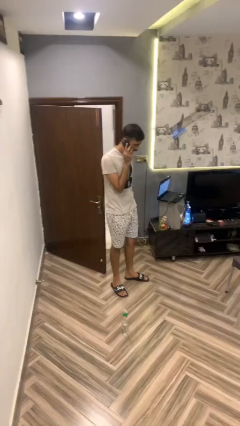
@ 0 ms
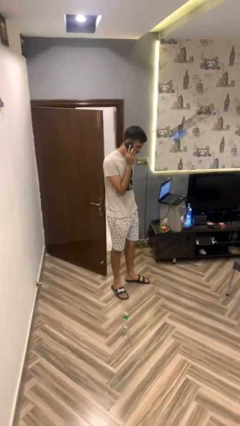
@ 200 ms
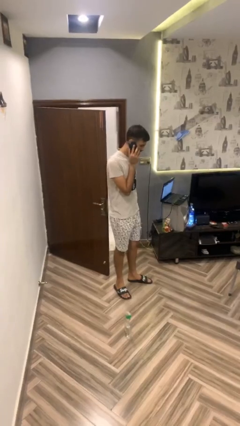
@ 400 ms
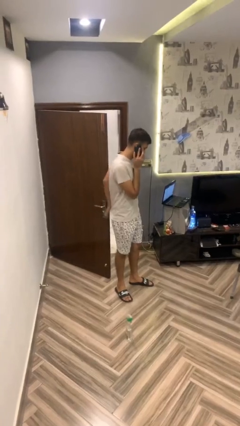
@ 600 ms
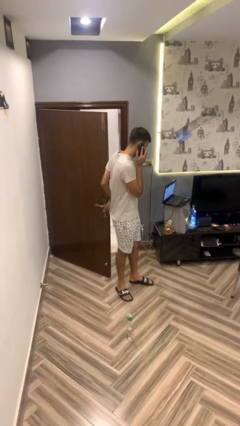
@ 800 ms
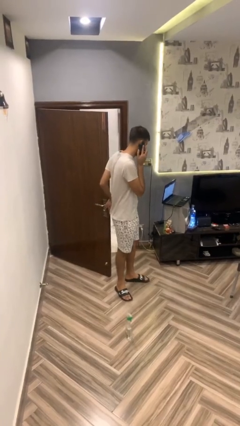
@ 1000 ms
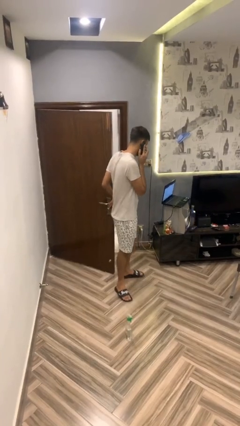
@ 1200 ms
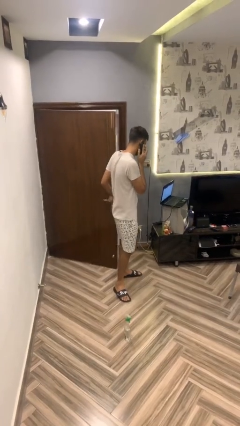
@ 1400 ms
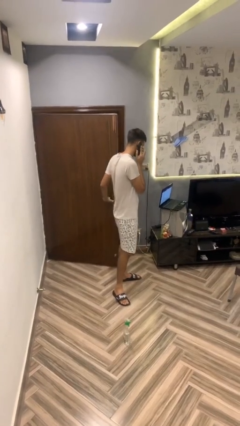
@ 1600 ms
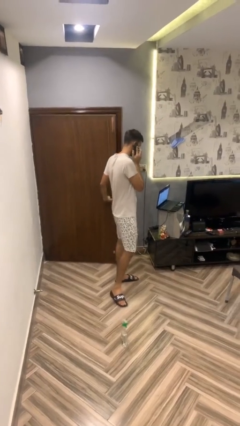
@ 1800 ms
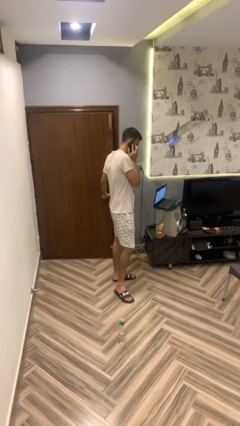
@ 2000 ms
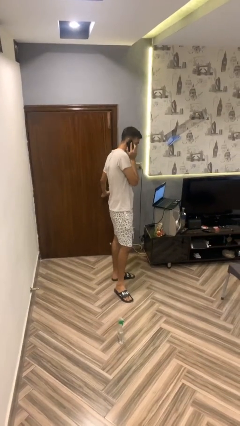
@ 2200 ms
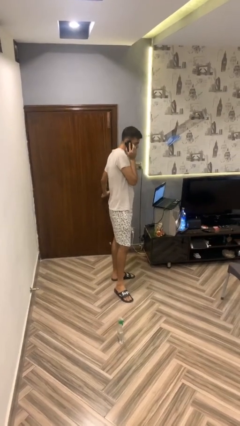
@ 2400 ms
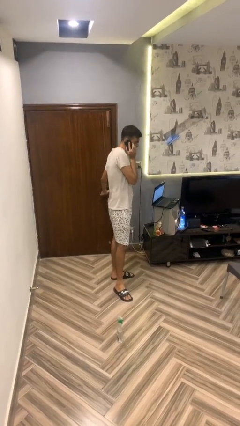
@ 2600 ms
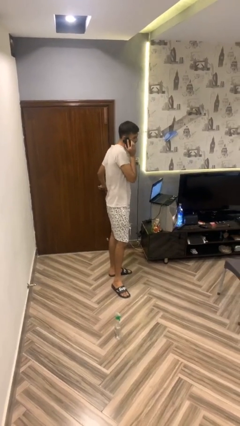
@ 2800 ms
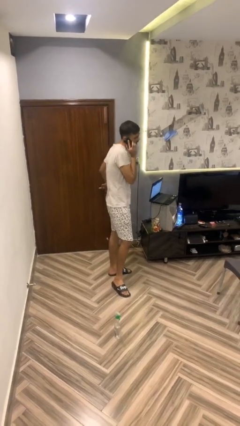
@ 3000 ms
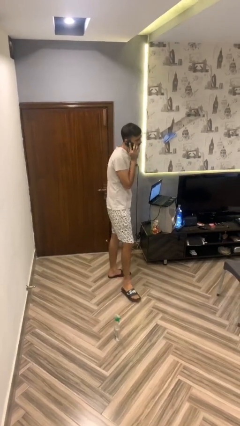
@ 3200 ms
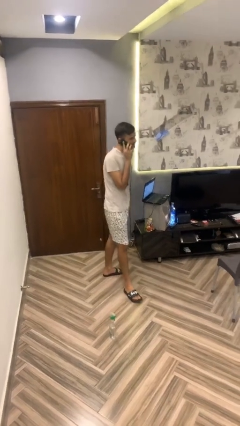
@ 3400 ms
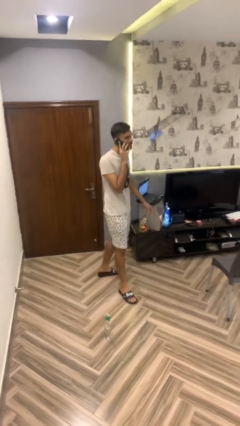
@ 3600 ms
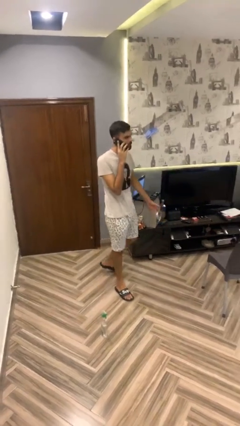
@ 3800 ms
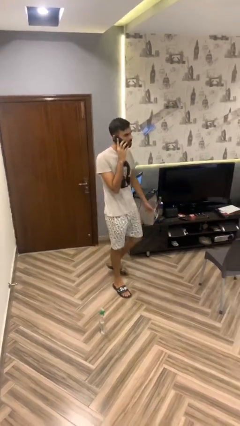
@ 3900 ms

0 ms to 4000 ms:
person closes facility door

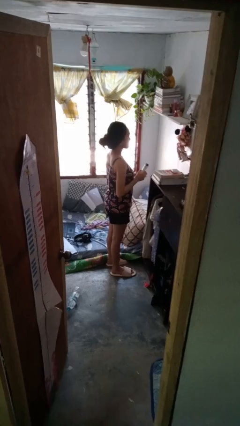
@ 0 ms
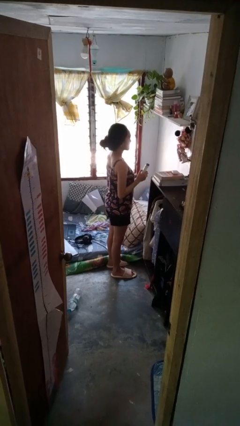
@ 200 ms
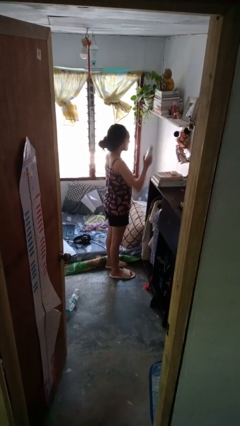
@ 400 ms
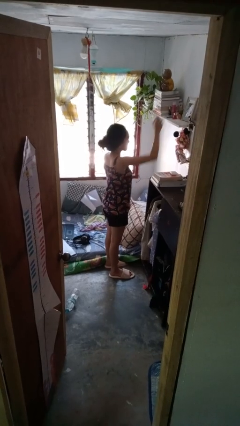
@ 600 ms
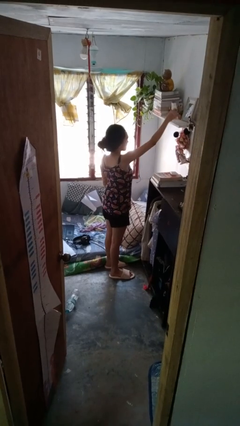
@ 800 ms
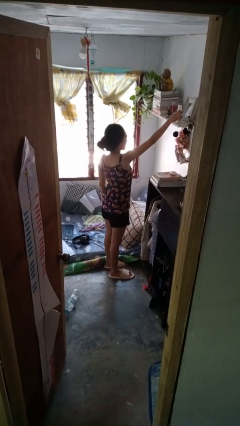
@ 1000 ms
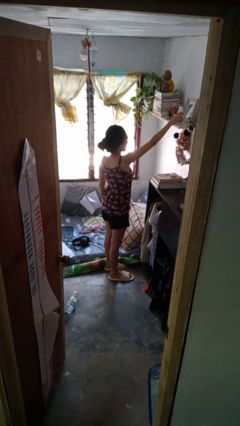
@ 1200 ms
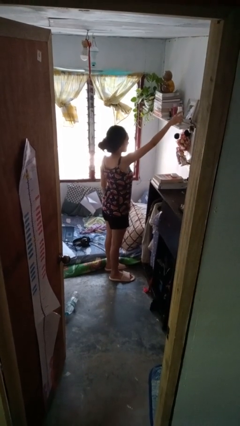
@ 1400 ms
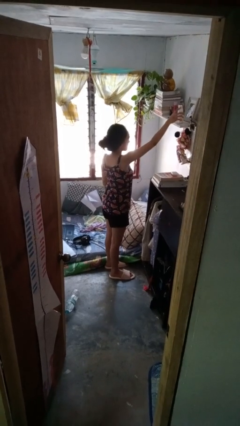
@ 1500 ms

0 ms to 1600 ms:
person puts down object on shelf

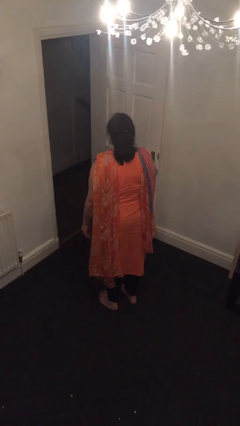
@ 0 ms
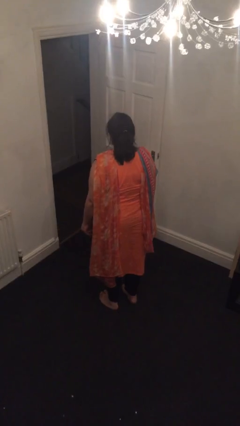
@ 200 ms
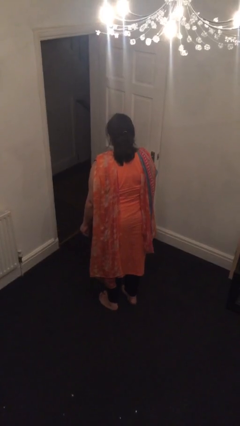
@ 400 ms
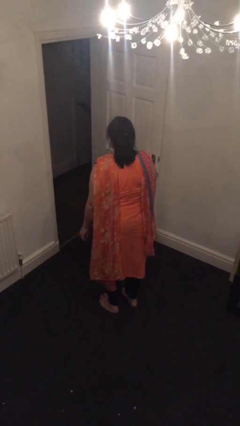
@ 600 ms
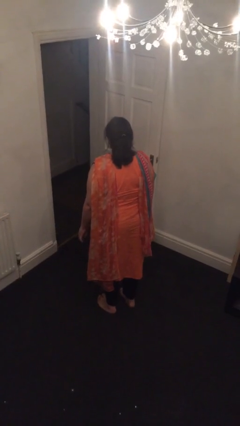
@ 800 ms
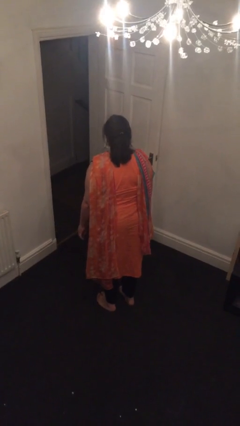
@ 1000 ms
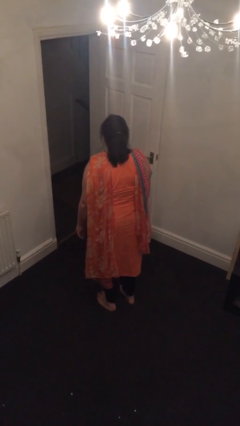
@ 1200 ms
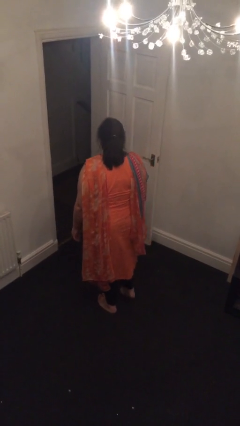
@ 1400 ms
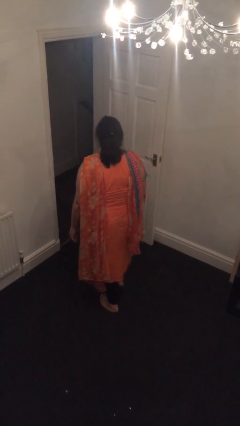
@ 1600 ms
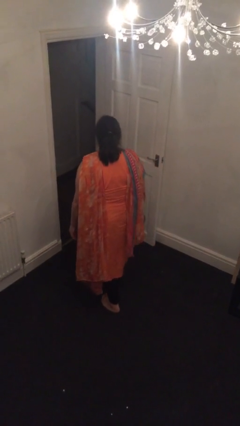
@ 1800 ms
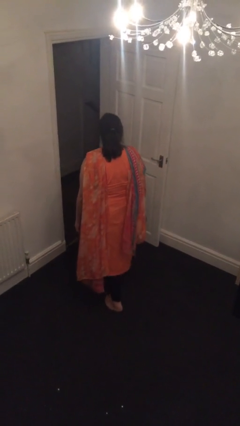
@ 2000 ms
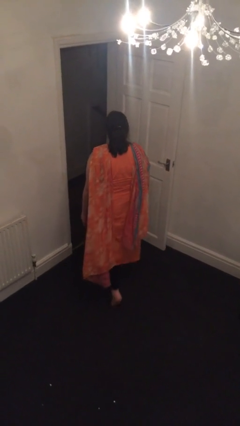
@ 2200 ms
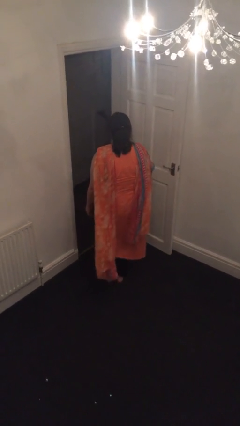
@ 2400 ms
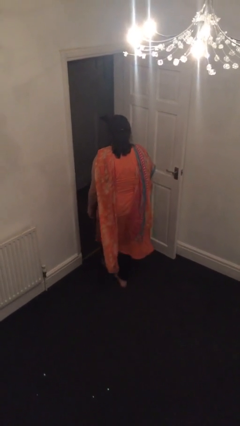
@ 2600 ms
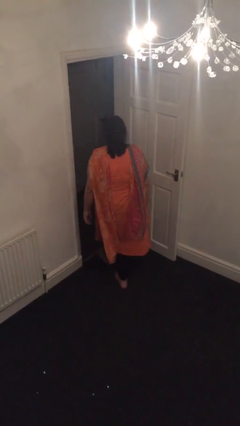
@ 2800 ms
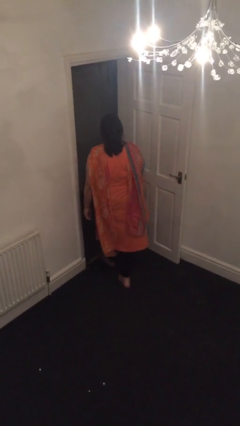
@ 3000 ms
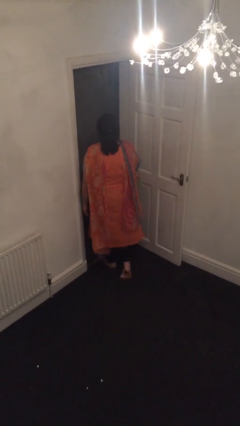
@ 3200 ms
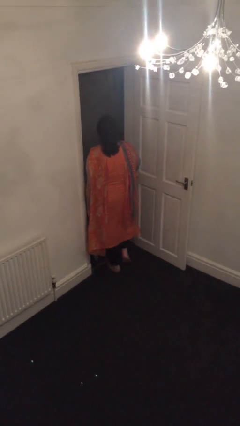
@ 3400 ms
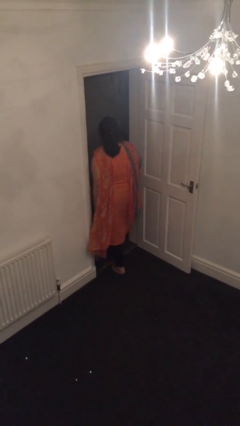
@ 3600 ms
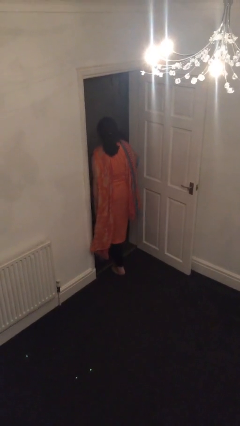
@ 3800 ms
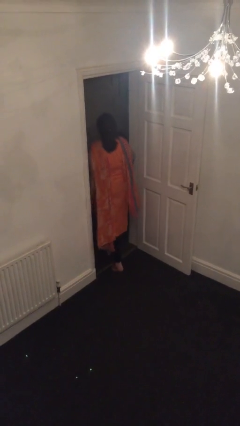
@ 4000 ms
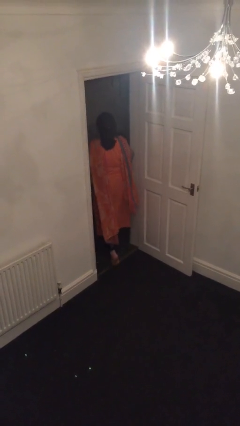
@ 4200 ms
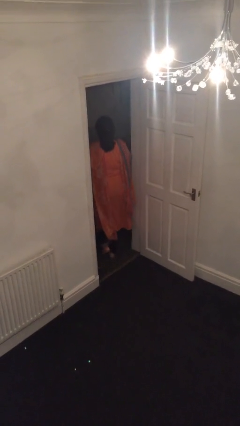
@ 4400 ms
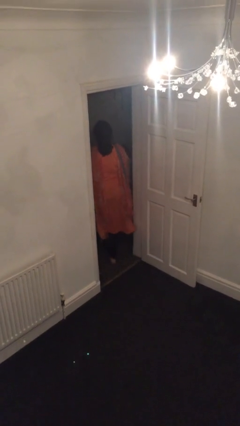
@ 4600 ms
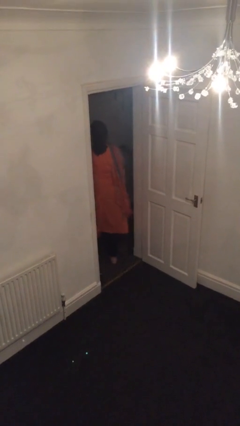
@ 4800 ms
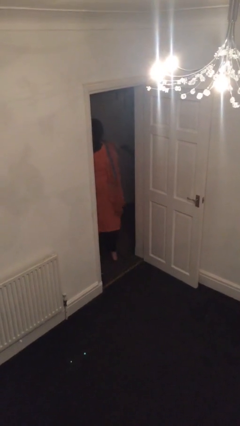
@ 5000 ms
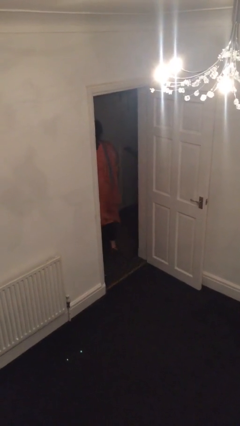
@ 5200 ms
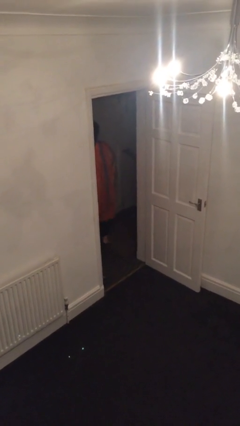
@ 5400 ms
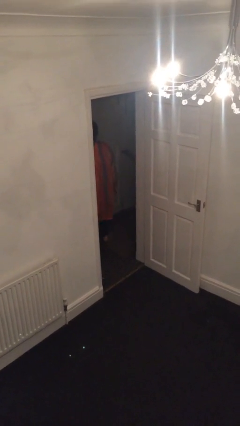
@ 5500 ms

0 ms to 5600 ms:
person exits scene through structure

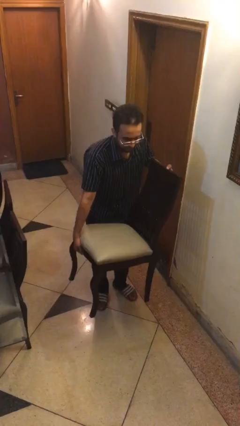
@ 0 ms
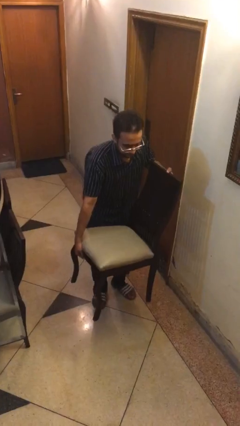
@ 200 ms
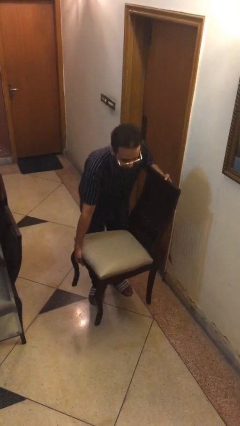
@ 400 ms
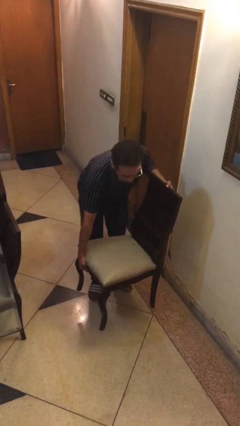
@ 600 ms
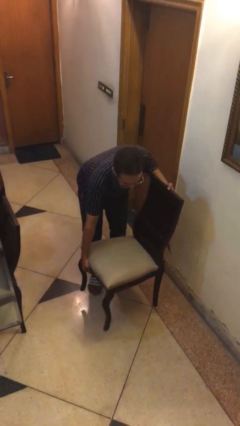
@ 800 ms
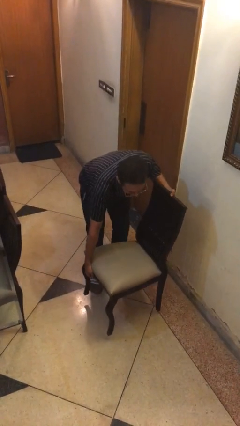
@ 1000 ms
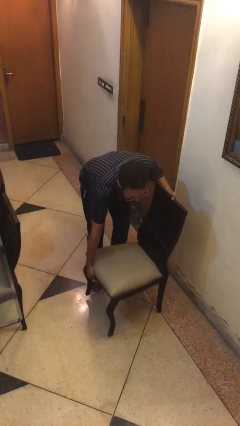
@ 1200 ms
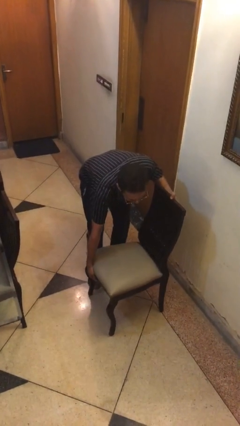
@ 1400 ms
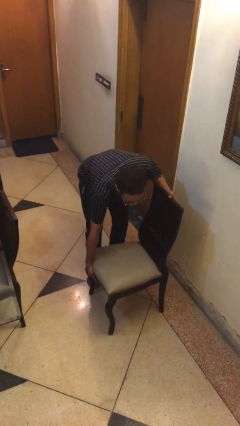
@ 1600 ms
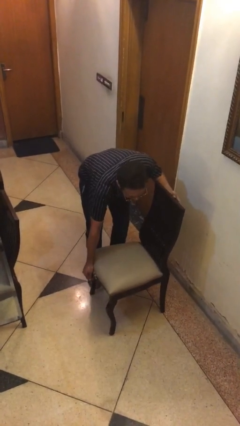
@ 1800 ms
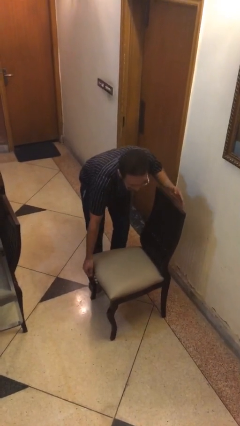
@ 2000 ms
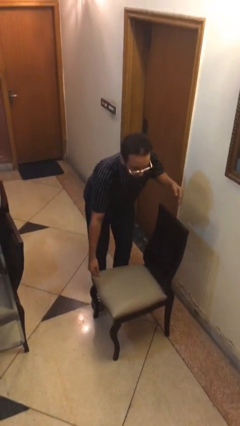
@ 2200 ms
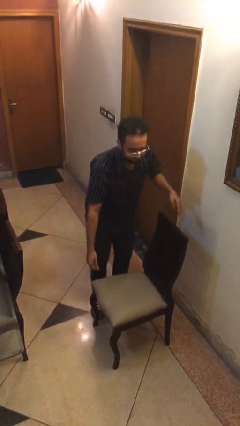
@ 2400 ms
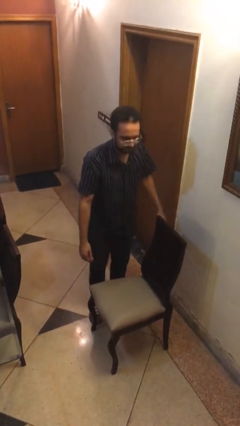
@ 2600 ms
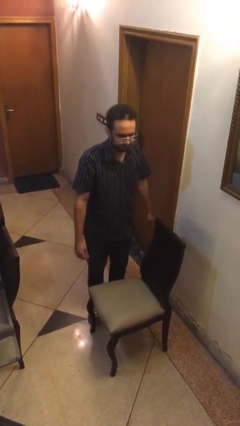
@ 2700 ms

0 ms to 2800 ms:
person puts down object on floor

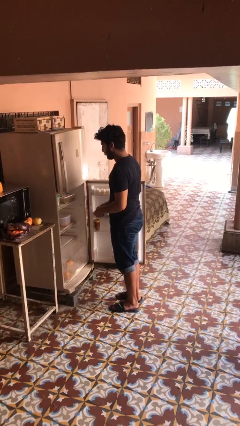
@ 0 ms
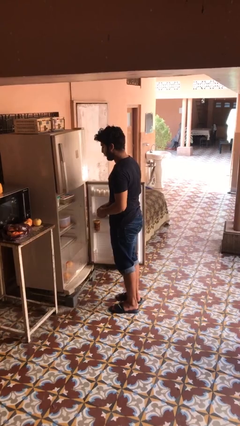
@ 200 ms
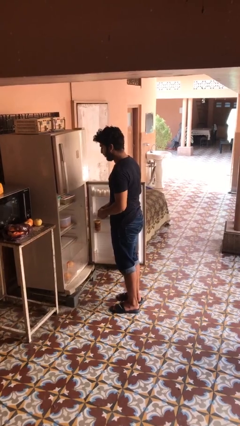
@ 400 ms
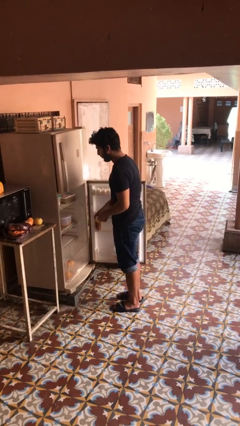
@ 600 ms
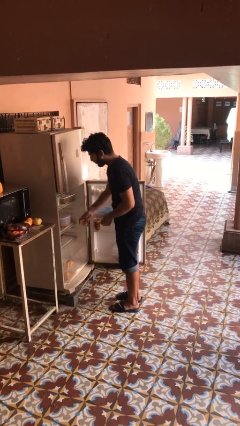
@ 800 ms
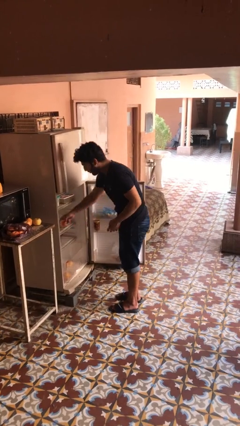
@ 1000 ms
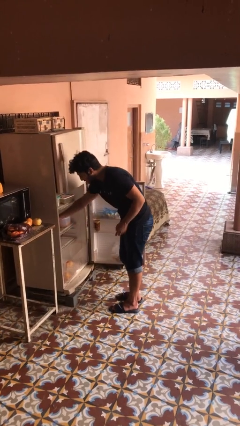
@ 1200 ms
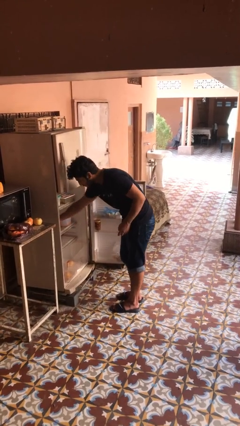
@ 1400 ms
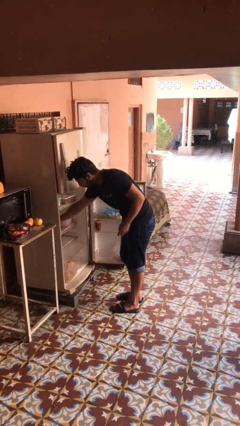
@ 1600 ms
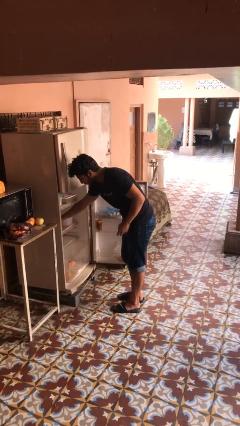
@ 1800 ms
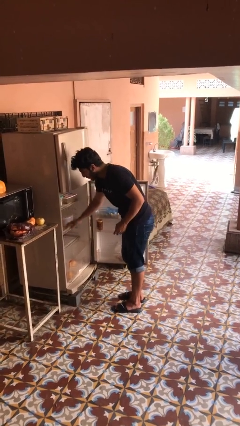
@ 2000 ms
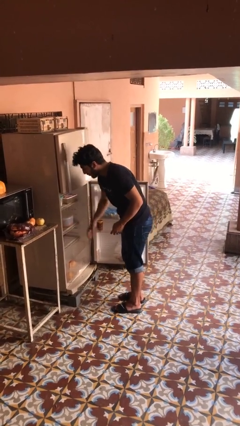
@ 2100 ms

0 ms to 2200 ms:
person loads groceries into refrigerator

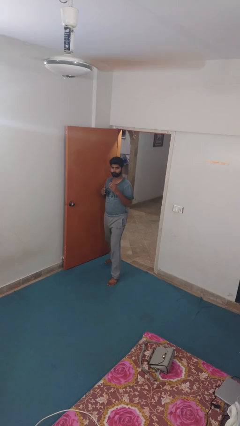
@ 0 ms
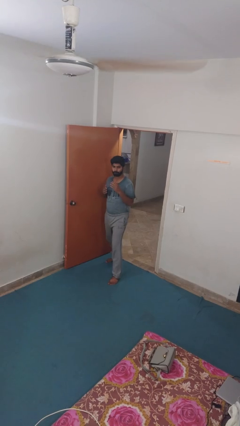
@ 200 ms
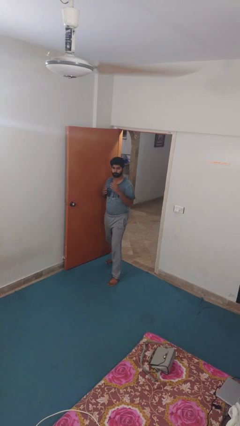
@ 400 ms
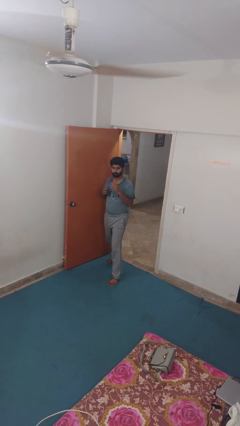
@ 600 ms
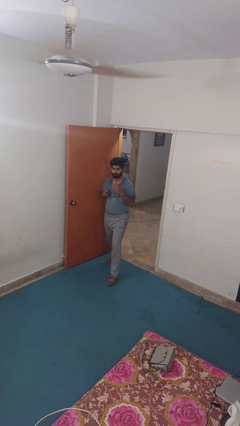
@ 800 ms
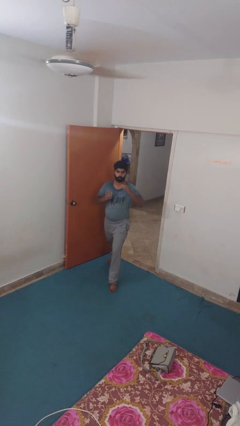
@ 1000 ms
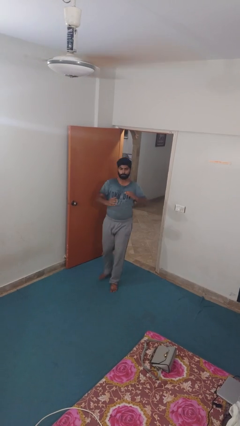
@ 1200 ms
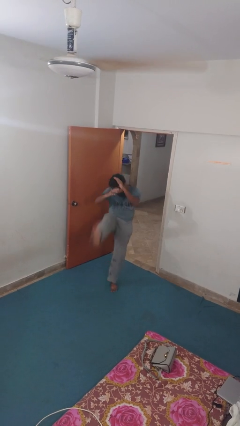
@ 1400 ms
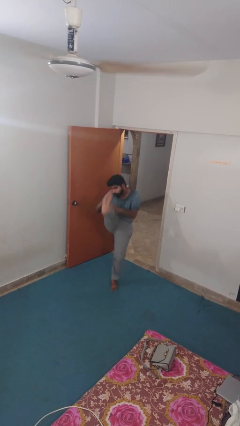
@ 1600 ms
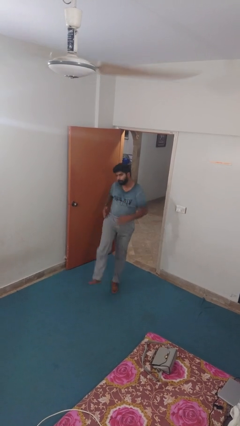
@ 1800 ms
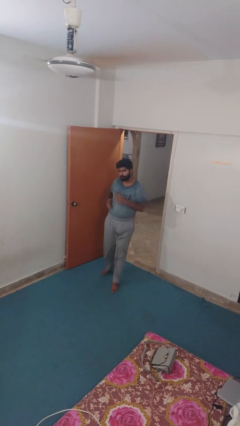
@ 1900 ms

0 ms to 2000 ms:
person karate kicks
